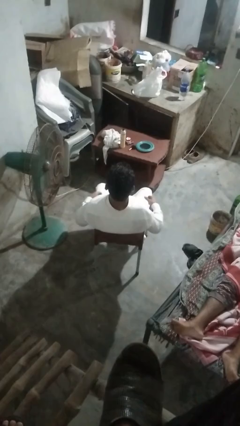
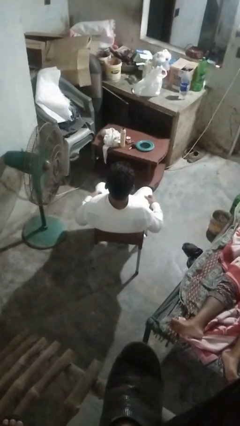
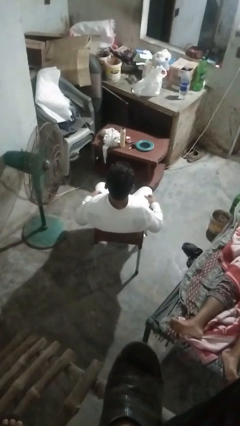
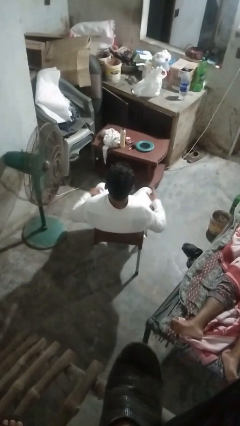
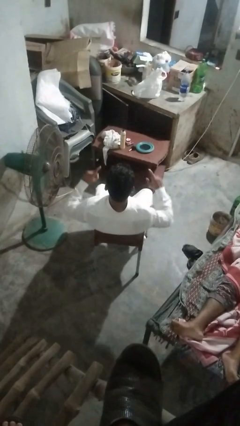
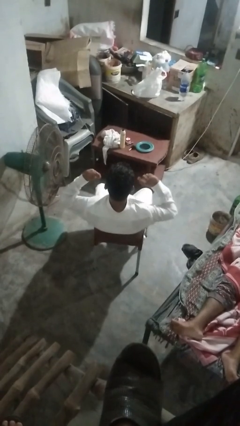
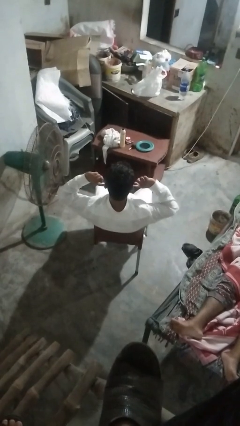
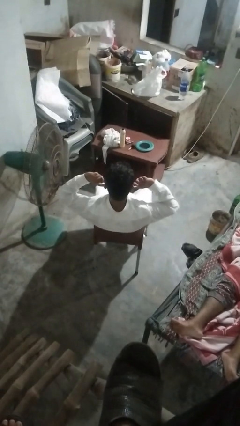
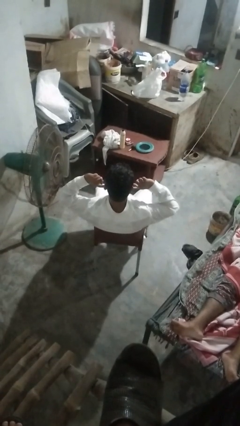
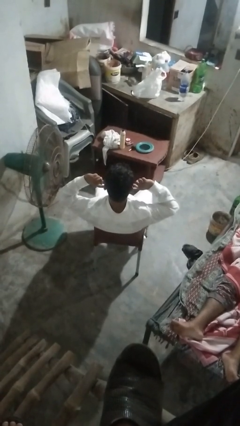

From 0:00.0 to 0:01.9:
person puts fingers in ear

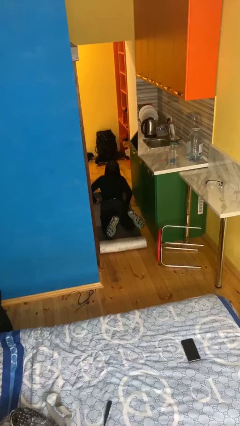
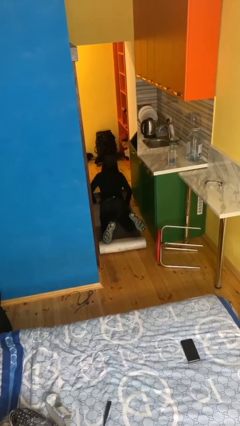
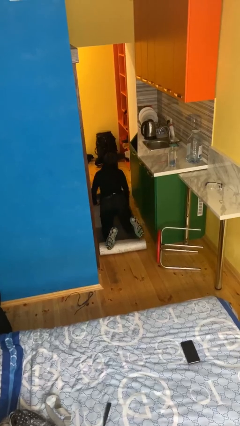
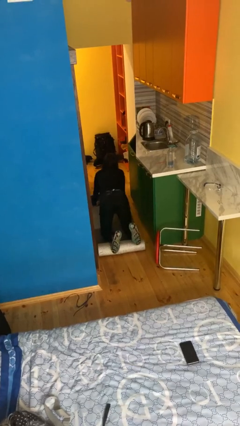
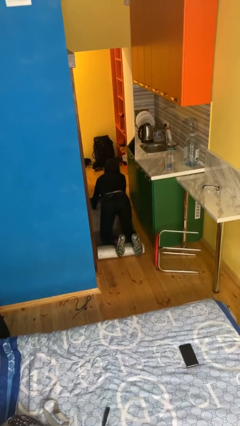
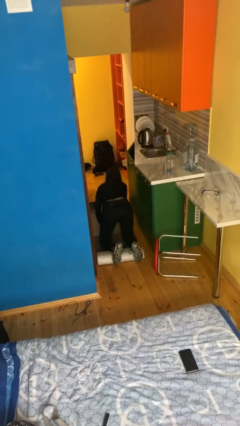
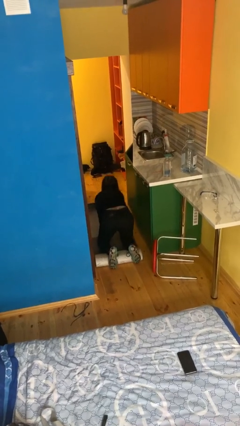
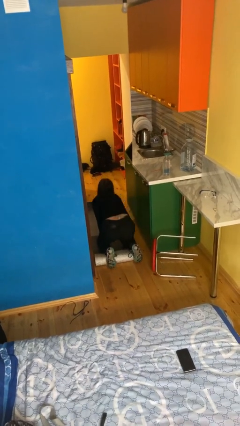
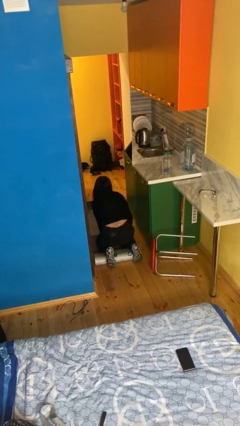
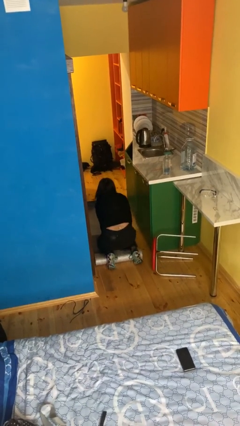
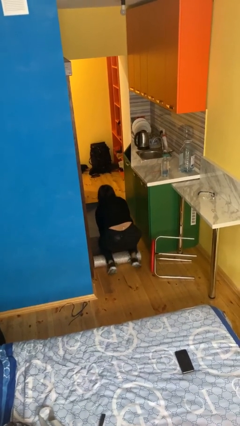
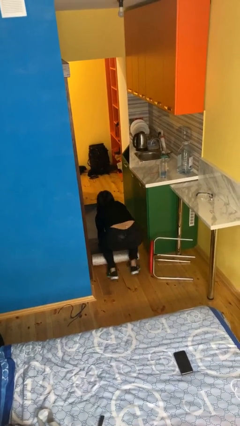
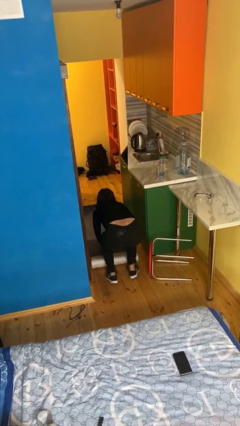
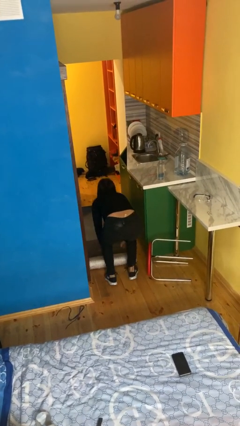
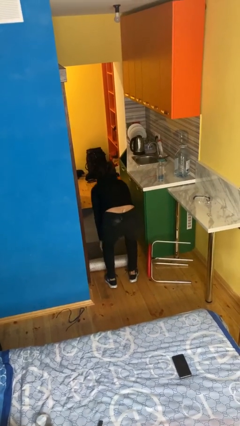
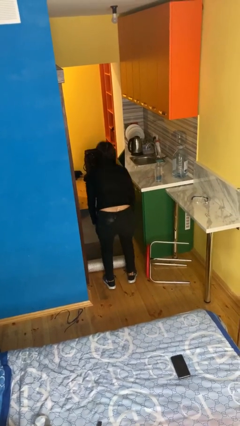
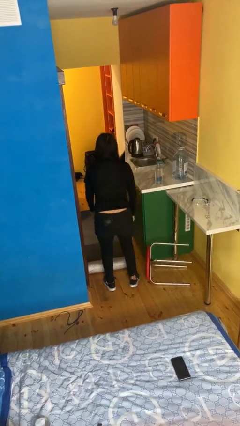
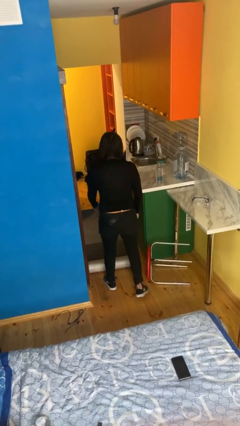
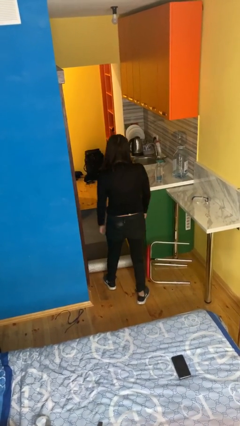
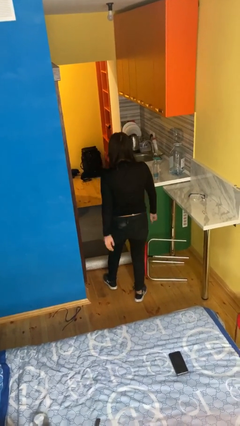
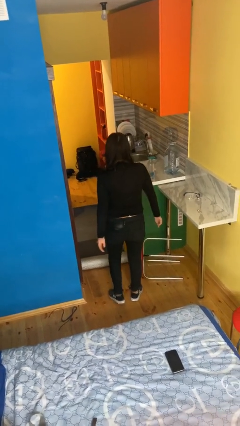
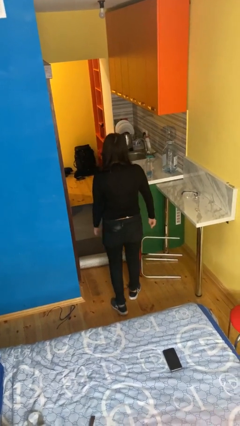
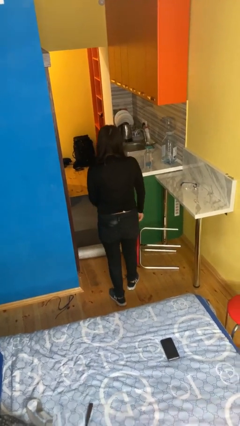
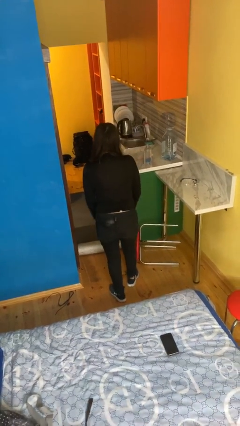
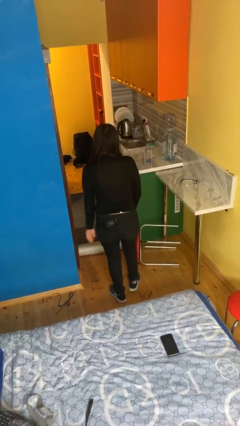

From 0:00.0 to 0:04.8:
person stands up from floor

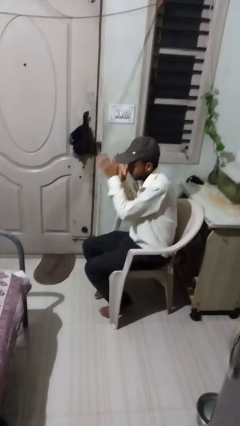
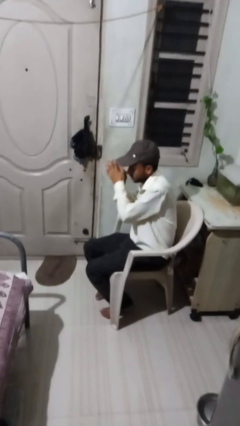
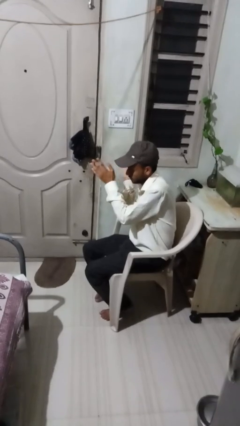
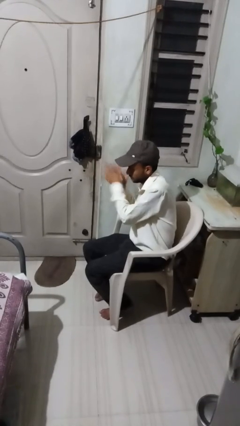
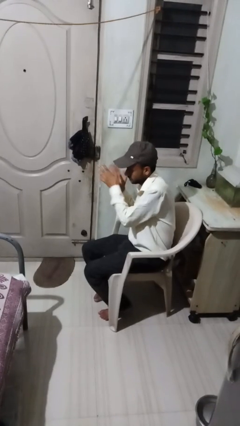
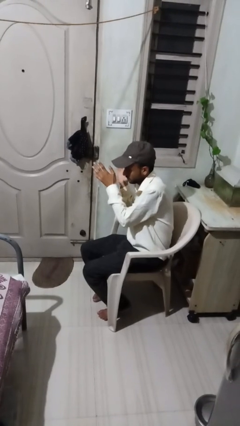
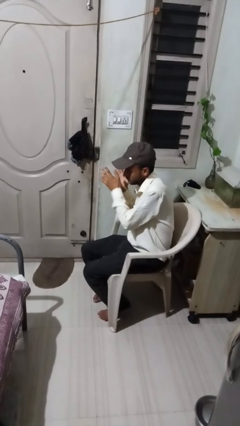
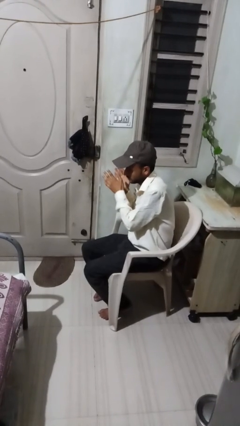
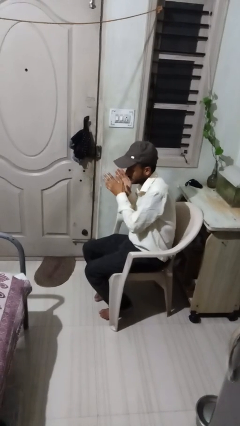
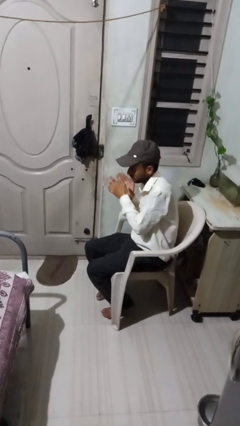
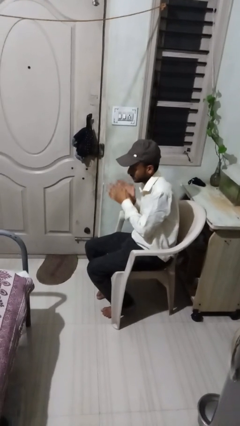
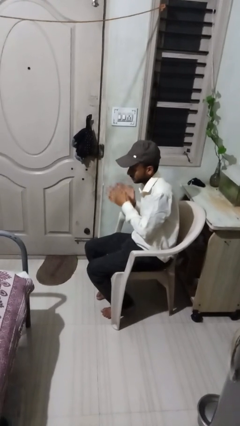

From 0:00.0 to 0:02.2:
person claps hands

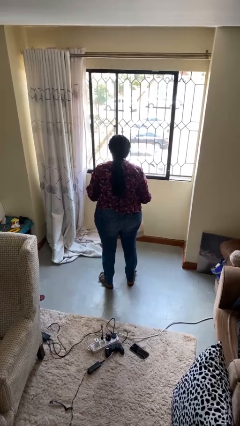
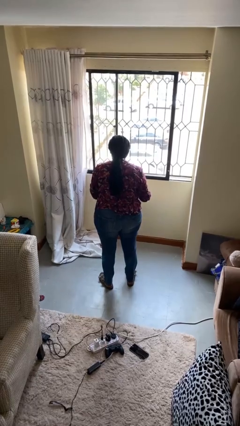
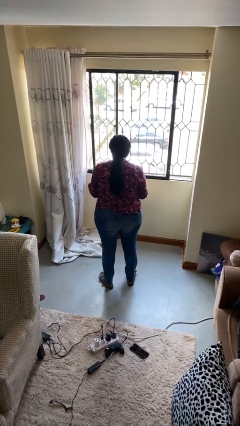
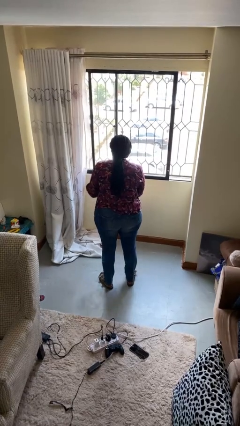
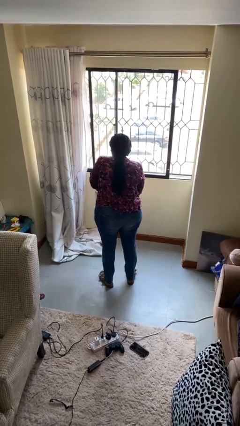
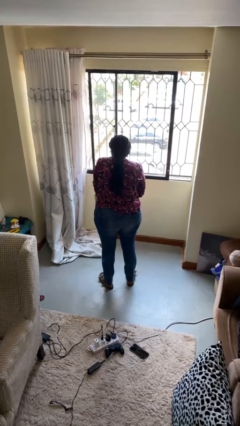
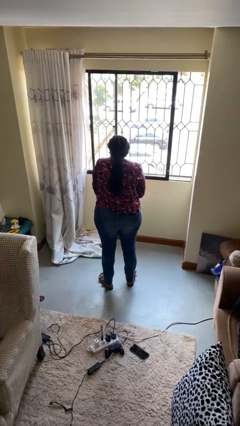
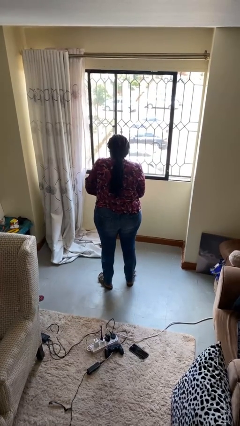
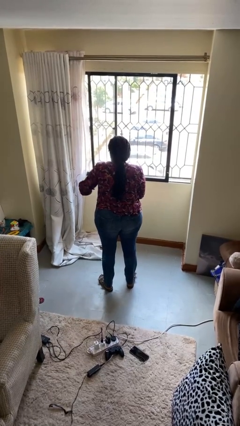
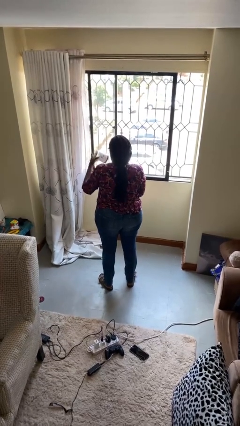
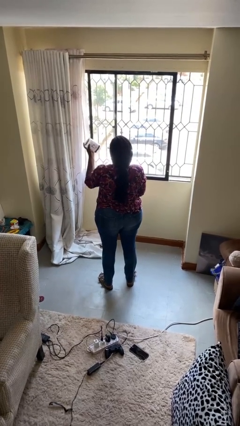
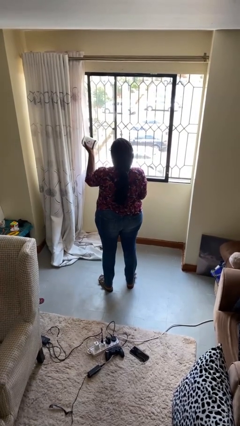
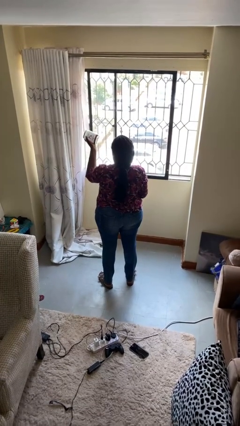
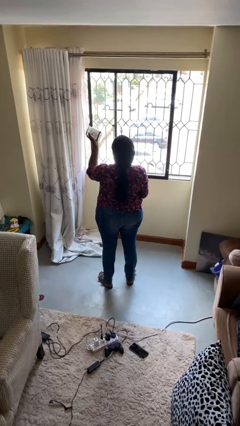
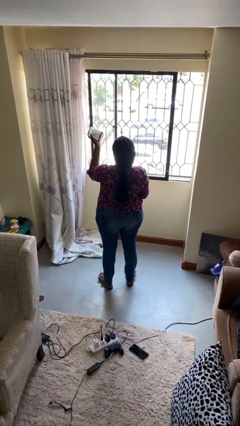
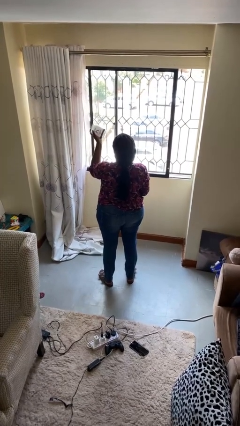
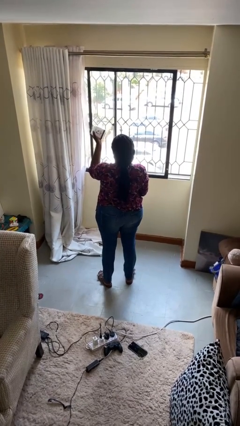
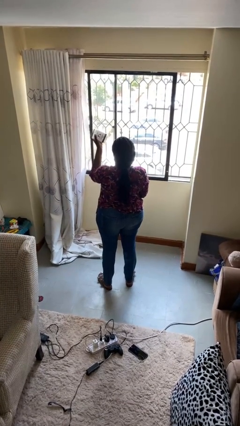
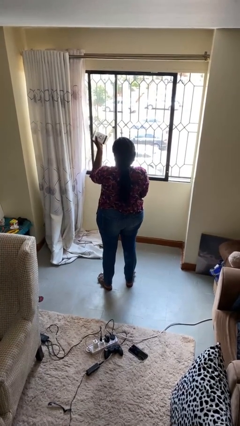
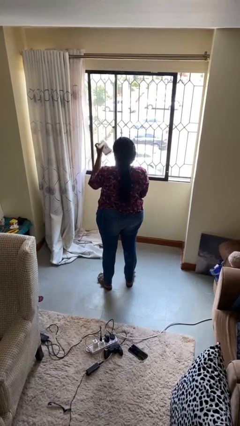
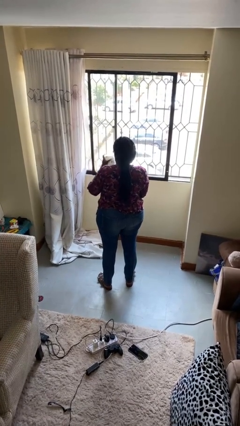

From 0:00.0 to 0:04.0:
person takes object from bag

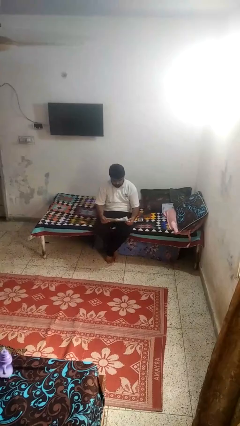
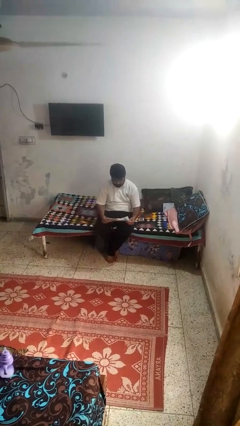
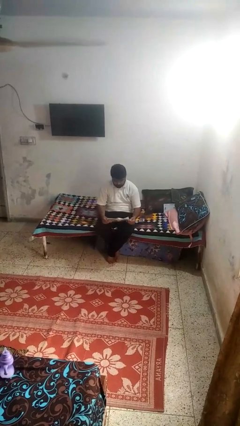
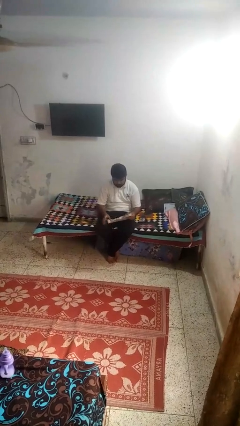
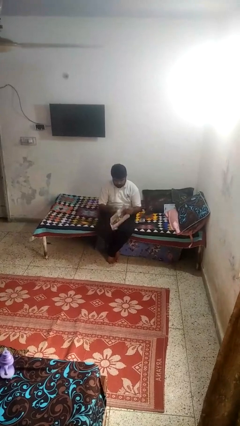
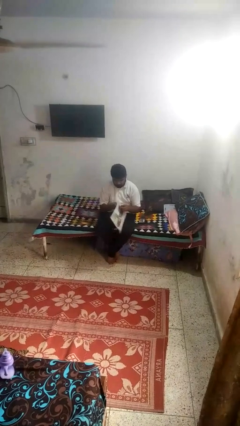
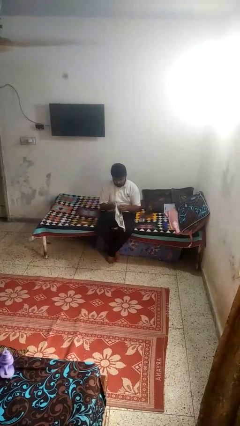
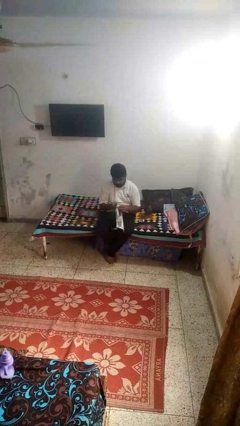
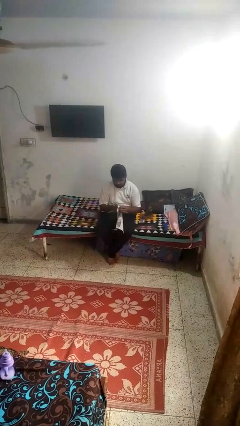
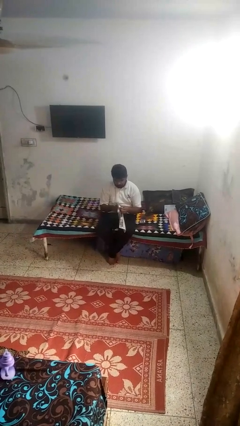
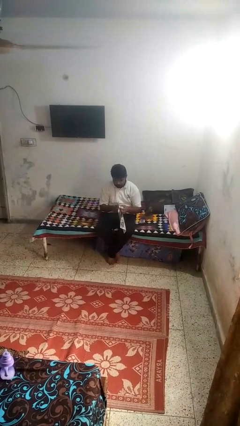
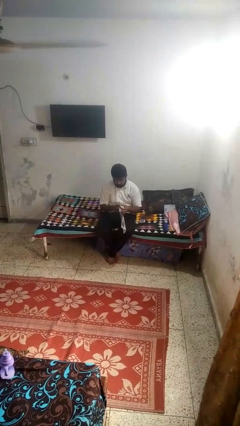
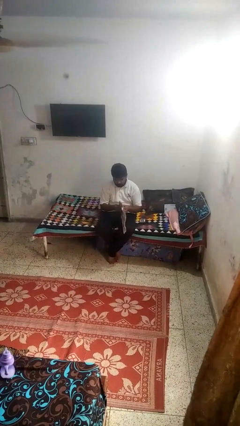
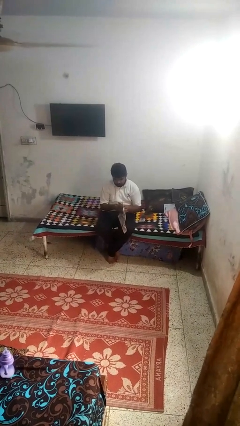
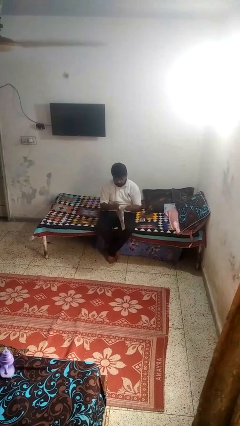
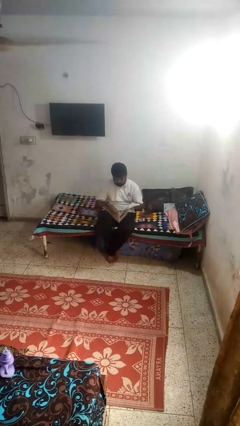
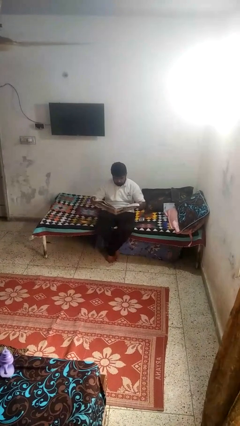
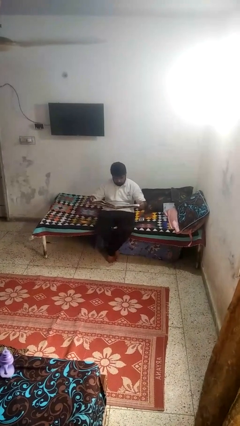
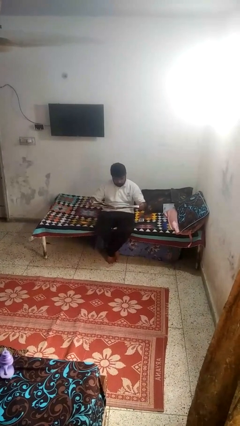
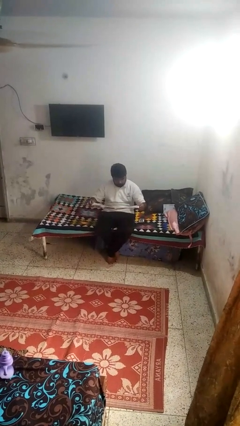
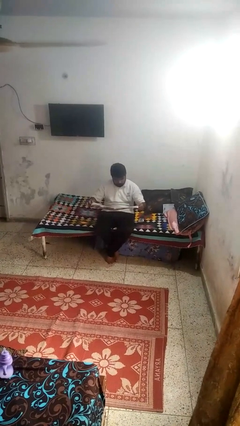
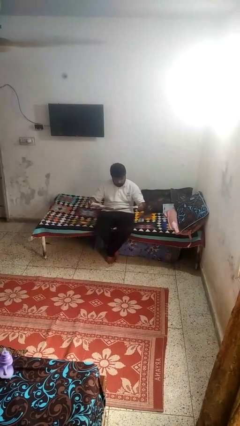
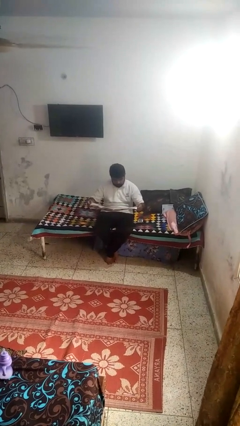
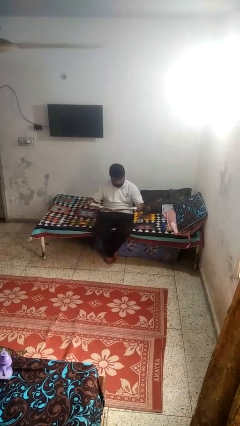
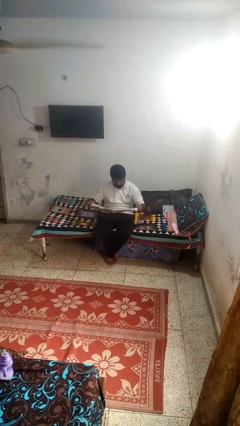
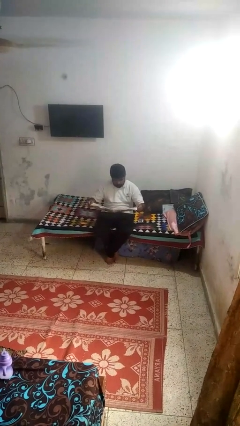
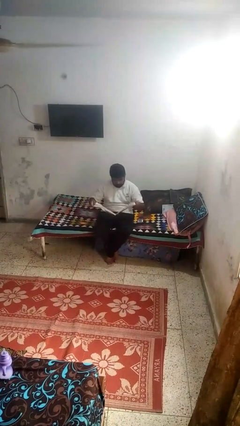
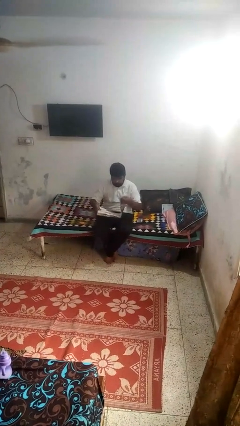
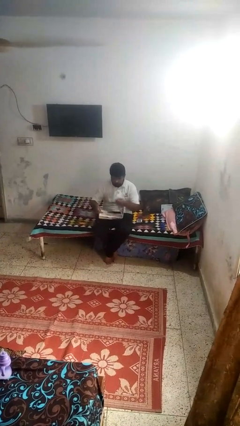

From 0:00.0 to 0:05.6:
person reads magazine
